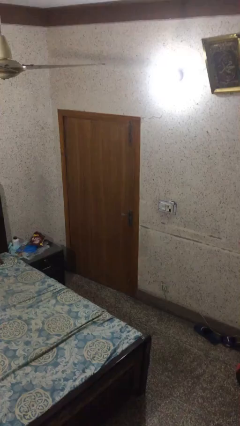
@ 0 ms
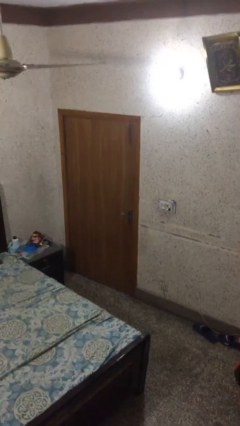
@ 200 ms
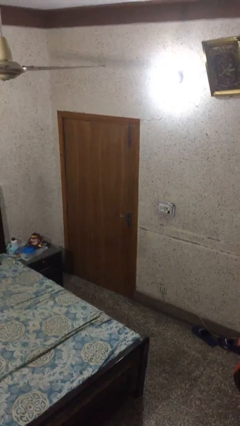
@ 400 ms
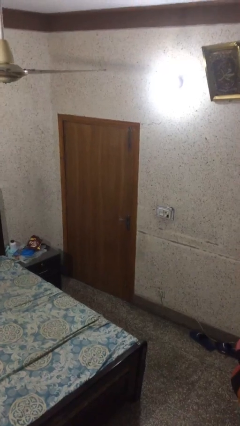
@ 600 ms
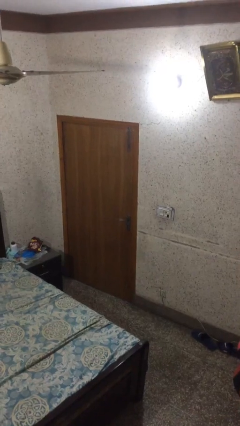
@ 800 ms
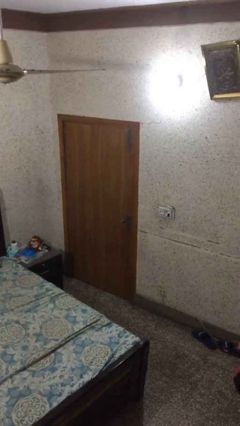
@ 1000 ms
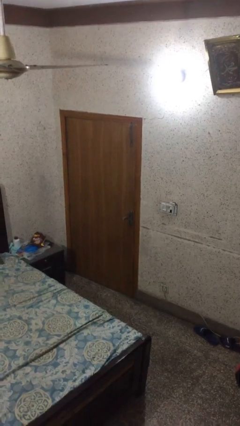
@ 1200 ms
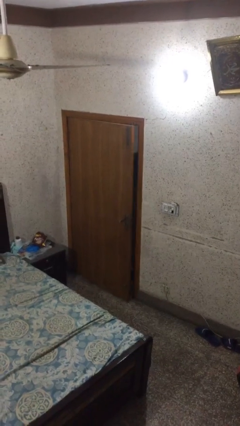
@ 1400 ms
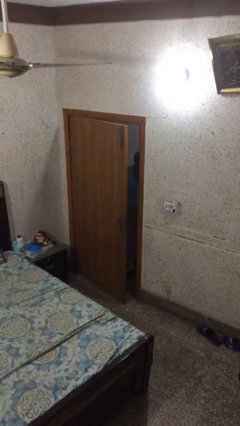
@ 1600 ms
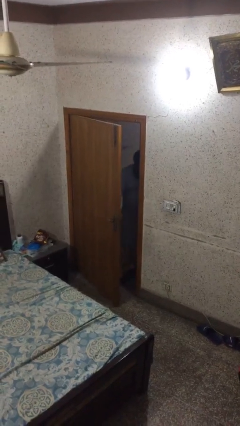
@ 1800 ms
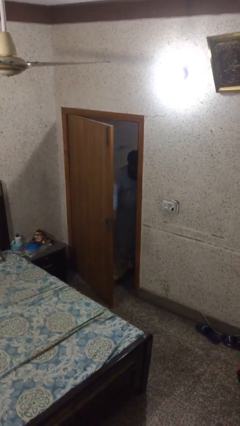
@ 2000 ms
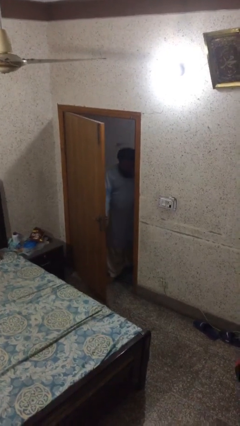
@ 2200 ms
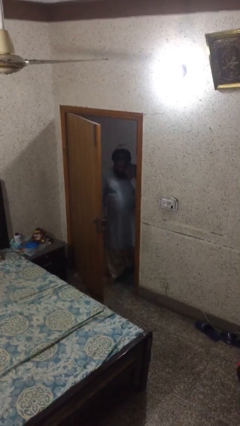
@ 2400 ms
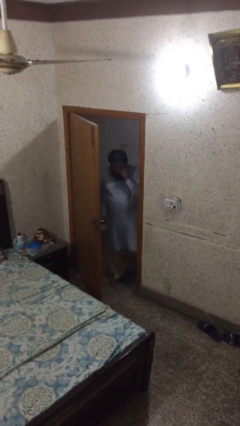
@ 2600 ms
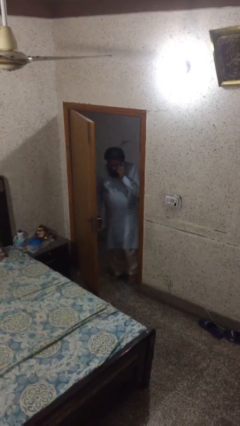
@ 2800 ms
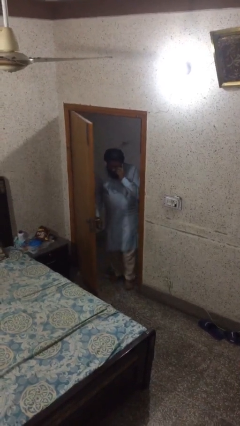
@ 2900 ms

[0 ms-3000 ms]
person opens facility door

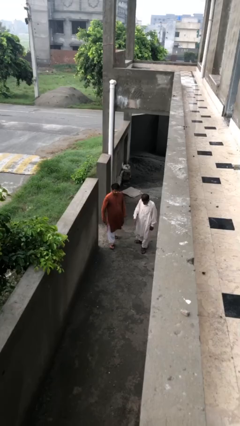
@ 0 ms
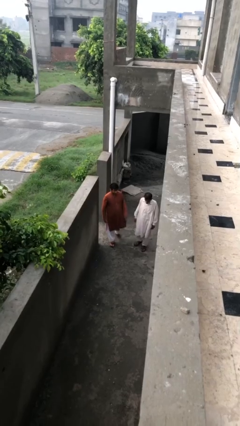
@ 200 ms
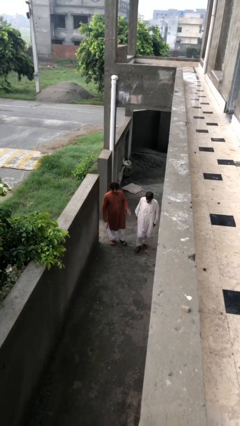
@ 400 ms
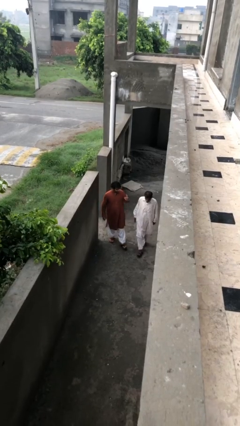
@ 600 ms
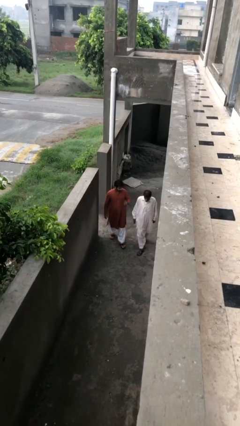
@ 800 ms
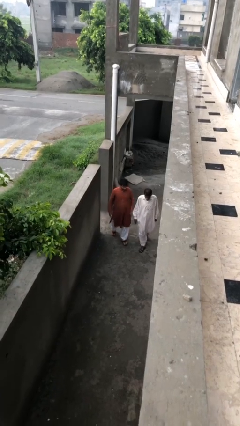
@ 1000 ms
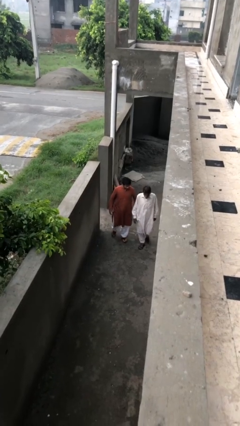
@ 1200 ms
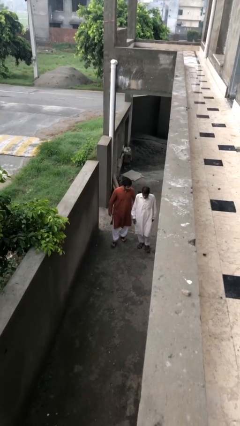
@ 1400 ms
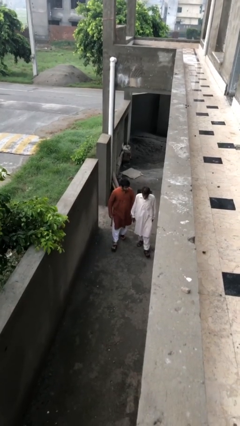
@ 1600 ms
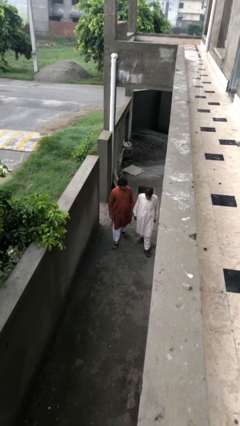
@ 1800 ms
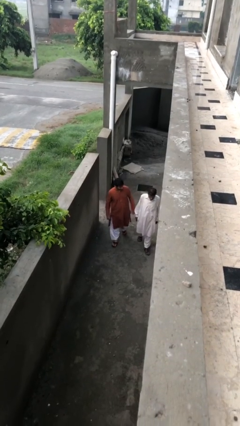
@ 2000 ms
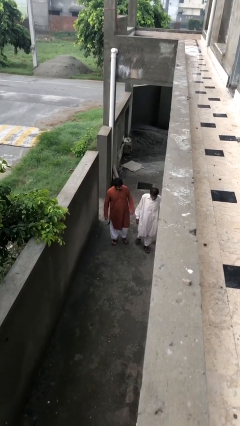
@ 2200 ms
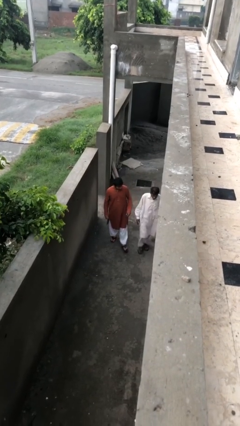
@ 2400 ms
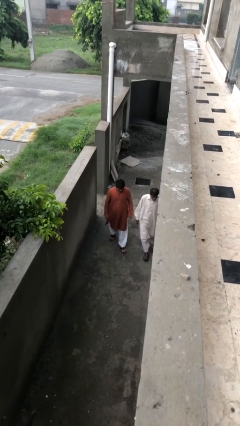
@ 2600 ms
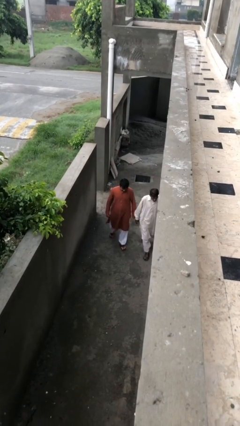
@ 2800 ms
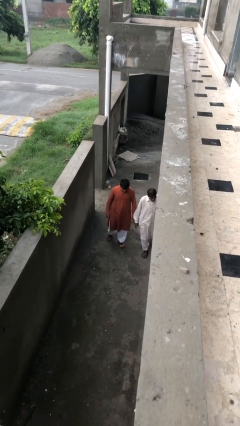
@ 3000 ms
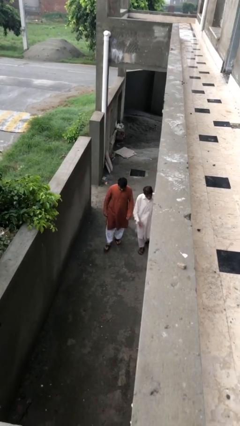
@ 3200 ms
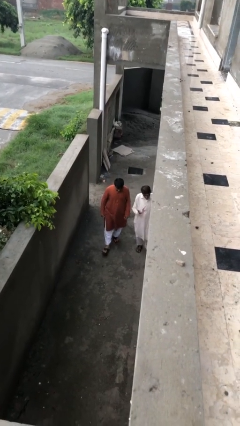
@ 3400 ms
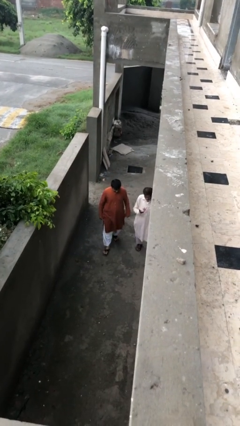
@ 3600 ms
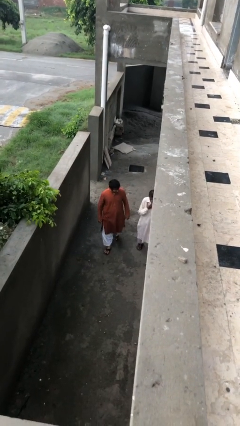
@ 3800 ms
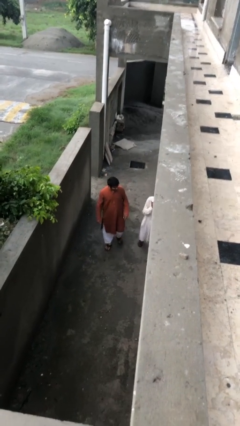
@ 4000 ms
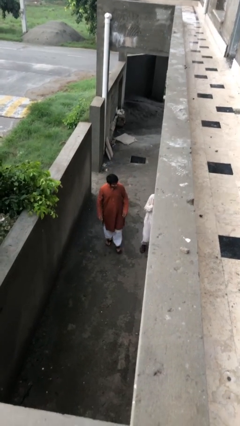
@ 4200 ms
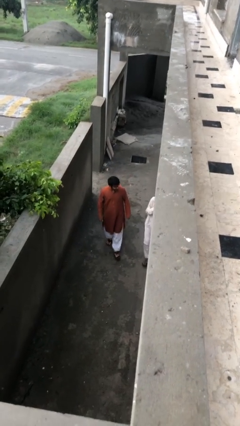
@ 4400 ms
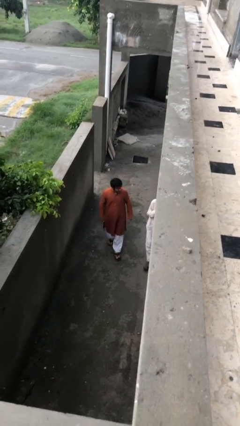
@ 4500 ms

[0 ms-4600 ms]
person talks to person

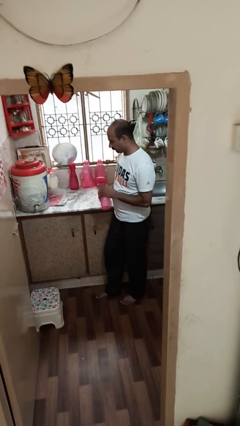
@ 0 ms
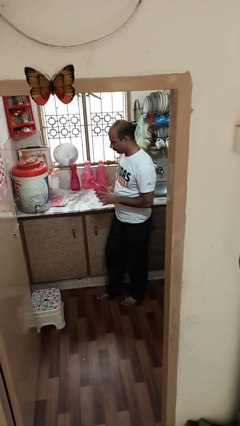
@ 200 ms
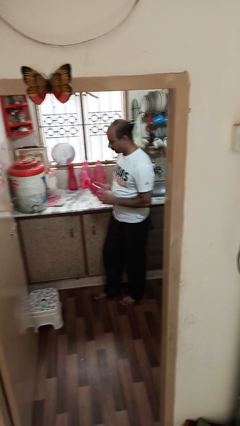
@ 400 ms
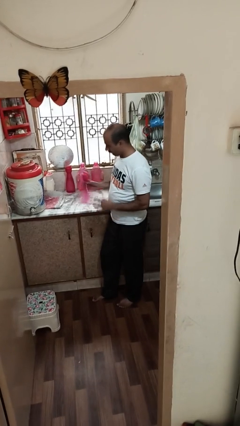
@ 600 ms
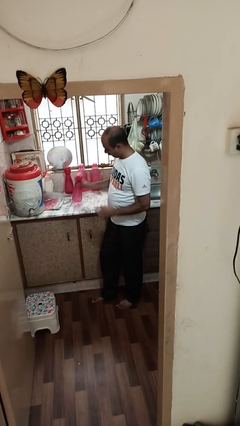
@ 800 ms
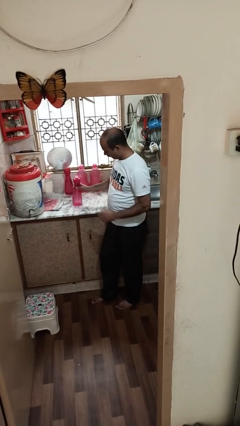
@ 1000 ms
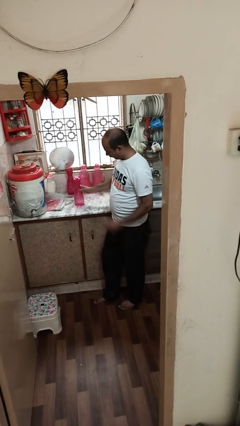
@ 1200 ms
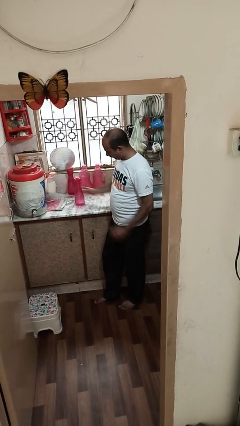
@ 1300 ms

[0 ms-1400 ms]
person puts down object on countertop

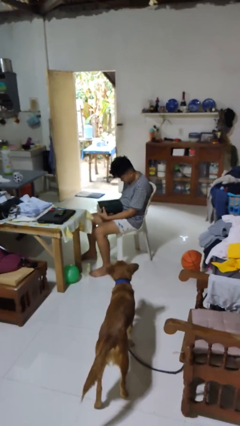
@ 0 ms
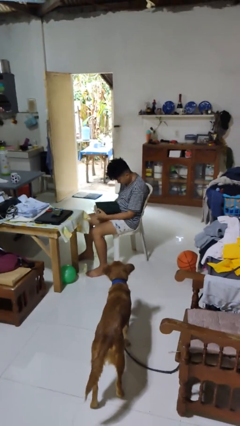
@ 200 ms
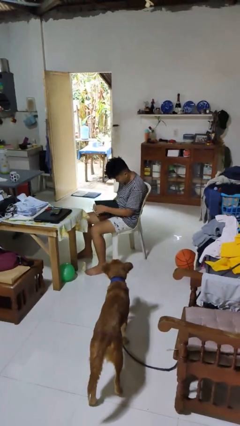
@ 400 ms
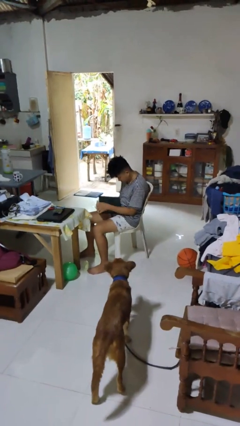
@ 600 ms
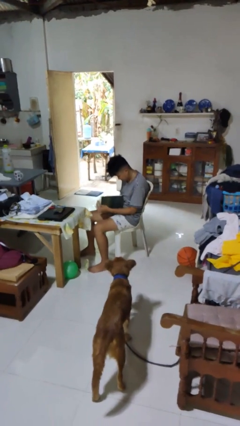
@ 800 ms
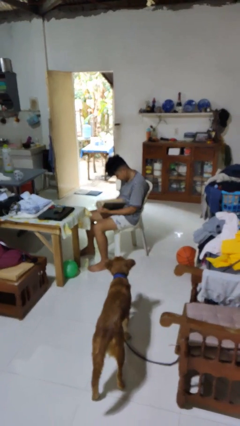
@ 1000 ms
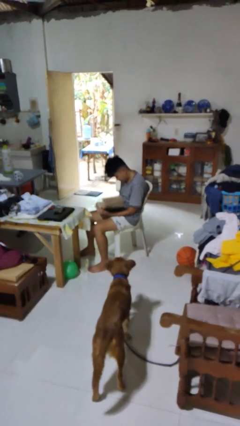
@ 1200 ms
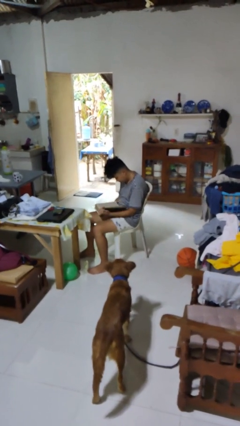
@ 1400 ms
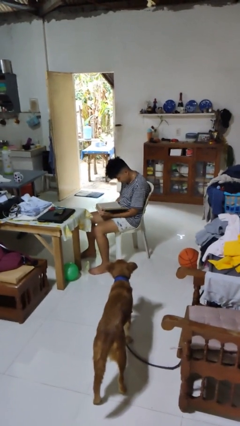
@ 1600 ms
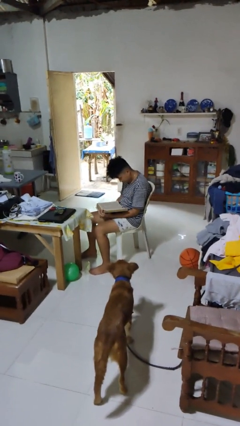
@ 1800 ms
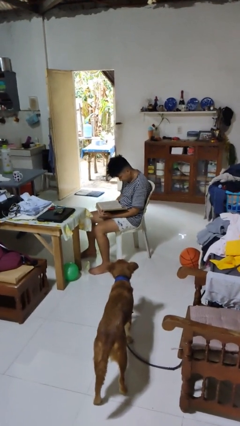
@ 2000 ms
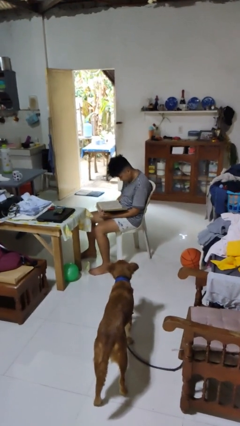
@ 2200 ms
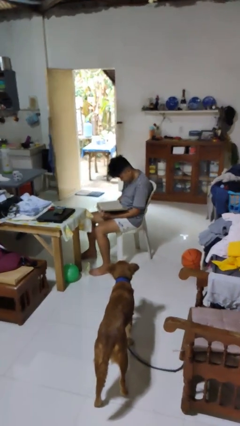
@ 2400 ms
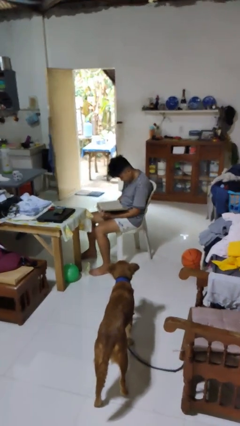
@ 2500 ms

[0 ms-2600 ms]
person reads book

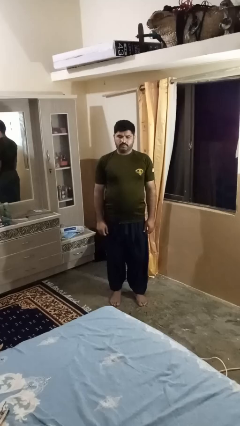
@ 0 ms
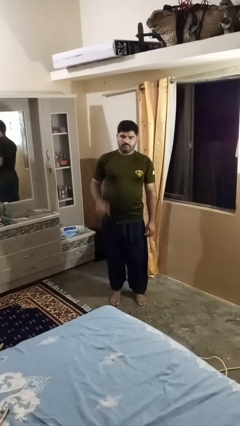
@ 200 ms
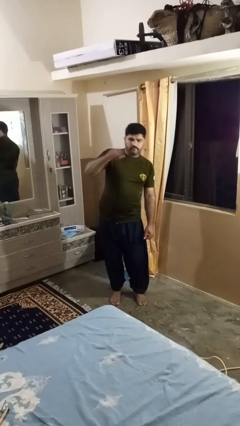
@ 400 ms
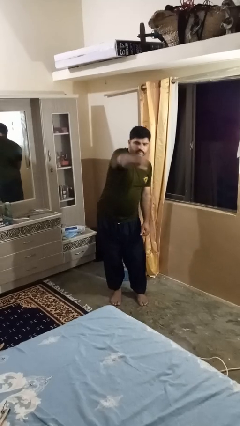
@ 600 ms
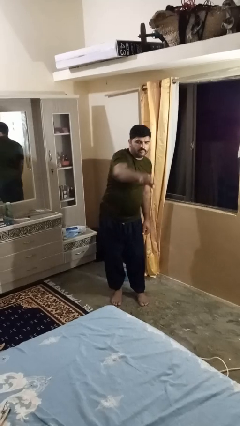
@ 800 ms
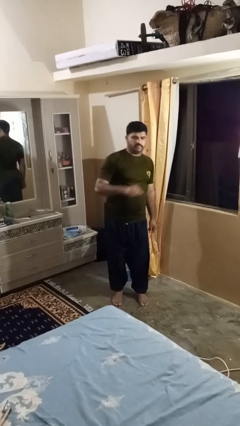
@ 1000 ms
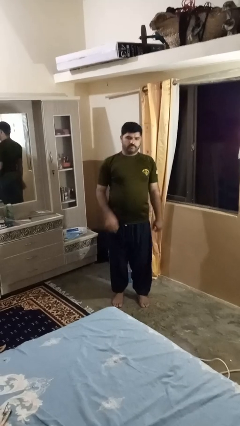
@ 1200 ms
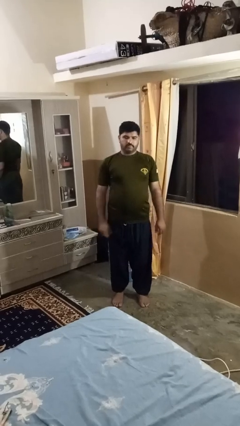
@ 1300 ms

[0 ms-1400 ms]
person karate chop

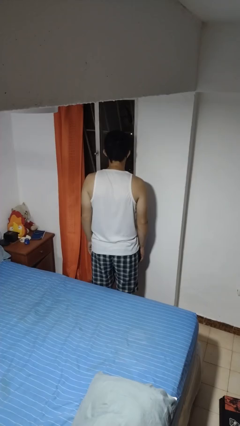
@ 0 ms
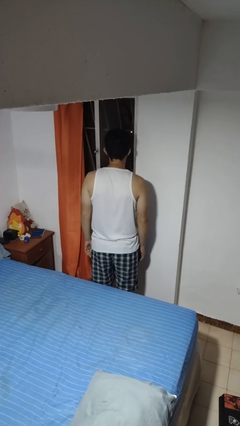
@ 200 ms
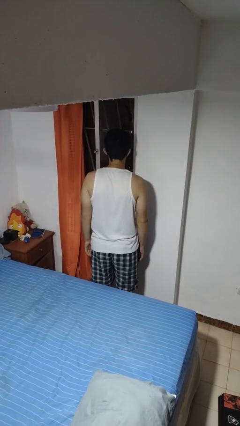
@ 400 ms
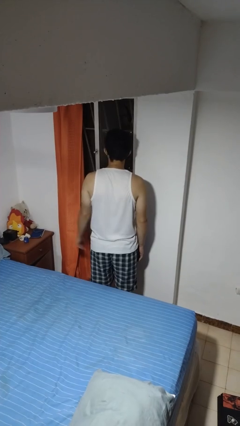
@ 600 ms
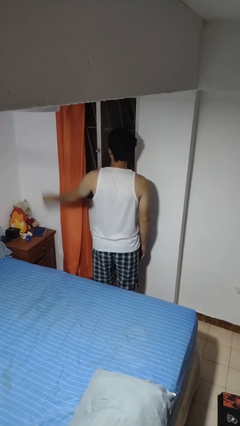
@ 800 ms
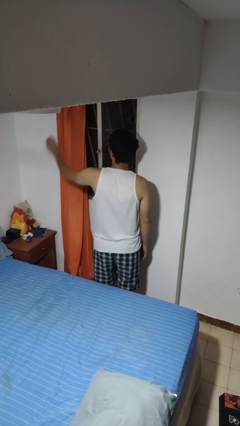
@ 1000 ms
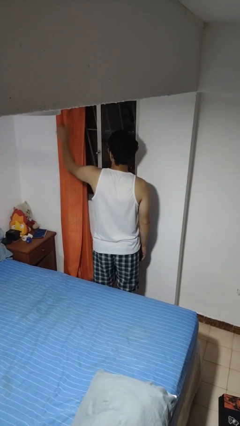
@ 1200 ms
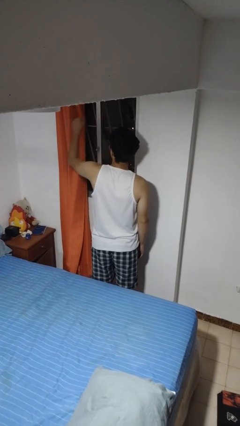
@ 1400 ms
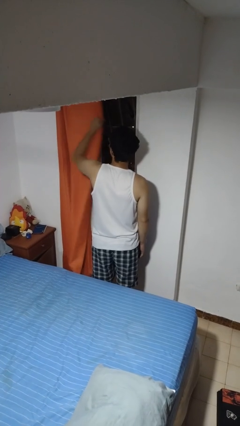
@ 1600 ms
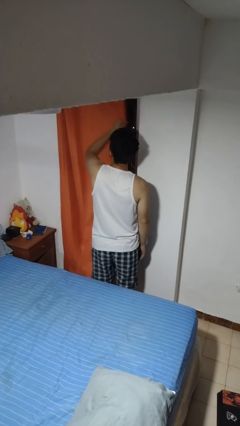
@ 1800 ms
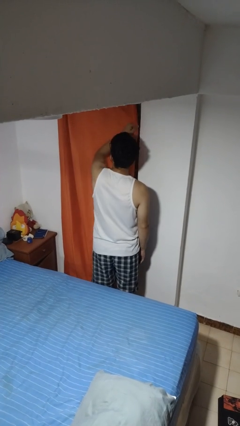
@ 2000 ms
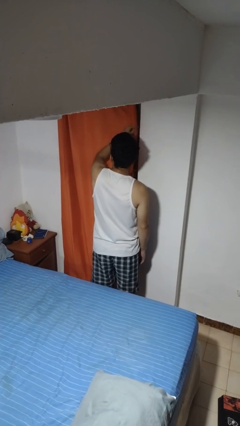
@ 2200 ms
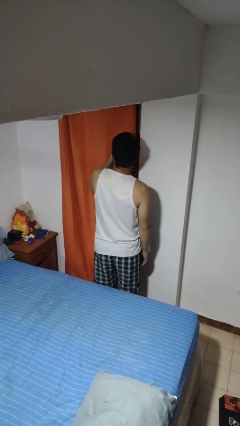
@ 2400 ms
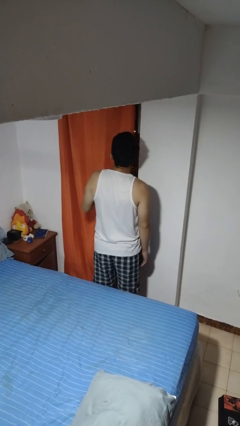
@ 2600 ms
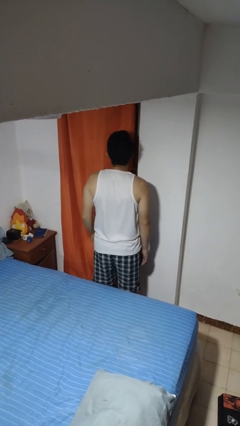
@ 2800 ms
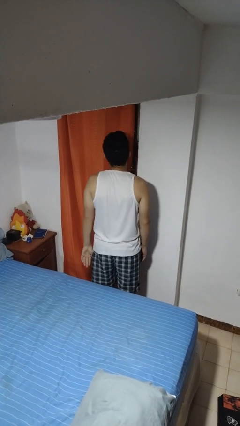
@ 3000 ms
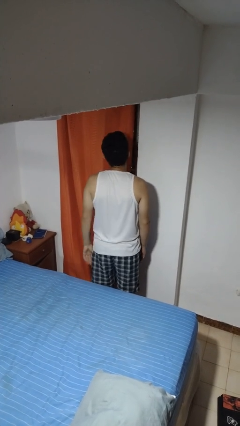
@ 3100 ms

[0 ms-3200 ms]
person closes curtains

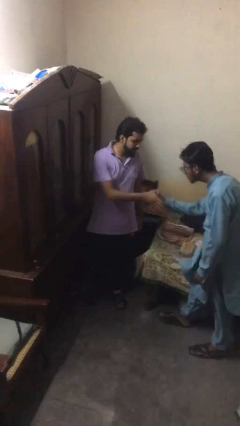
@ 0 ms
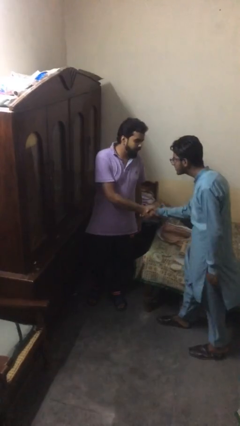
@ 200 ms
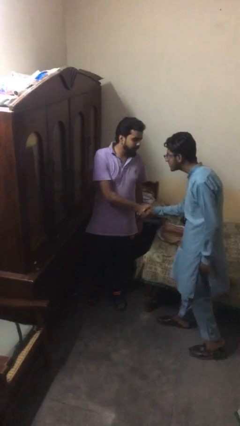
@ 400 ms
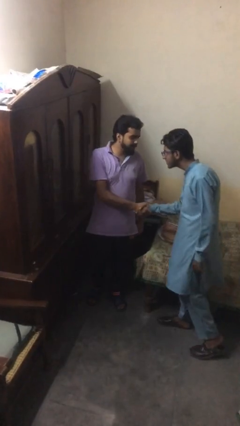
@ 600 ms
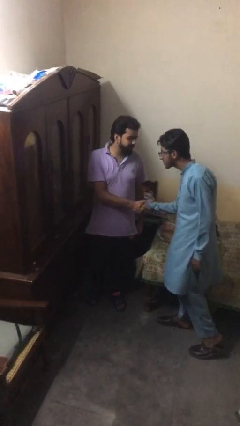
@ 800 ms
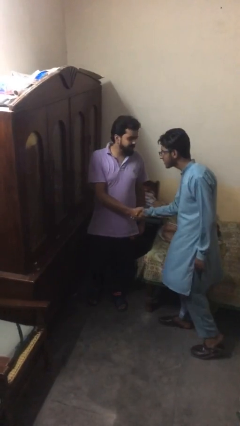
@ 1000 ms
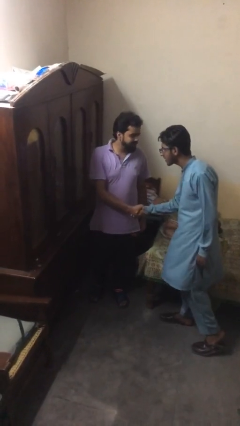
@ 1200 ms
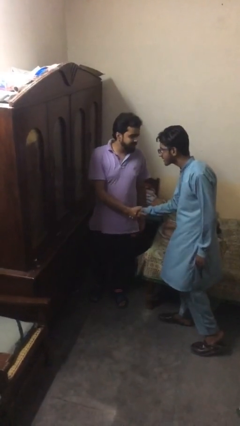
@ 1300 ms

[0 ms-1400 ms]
person shakes hand
